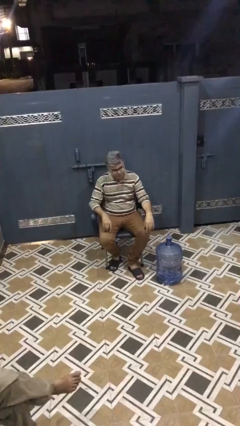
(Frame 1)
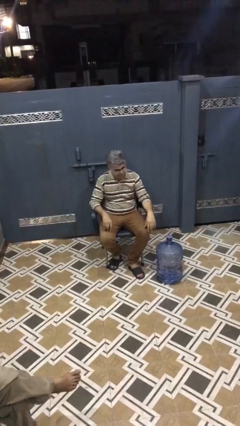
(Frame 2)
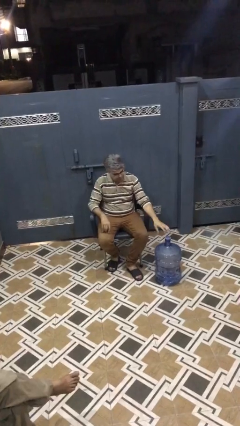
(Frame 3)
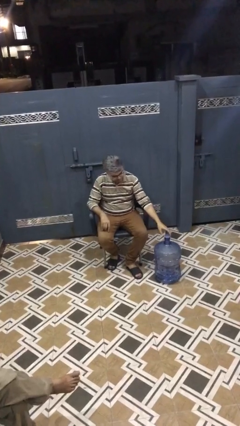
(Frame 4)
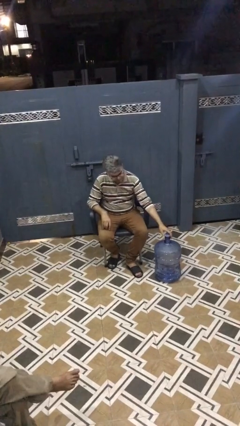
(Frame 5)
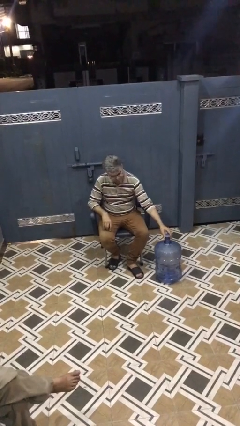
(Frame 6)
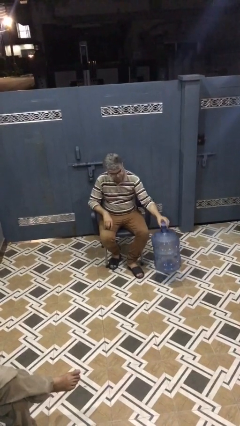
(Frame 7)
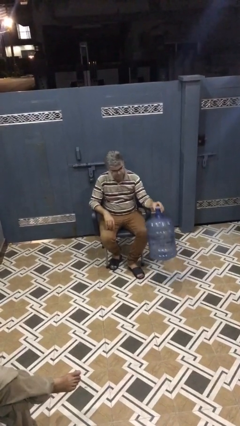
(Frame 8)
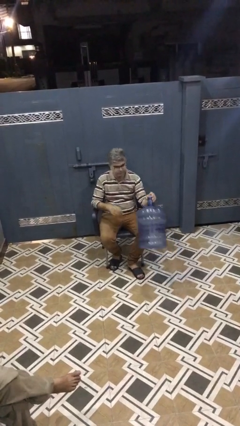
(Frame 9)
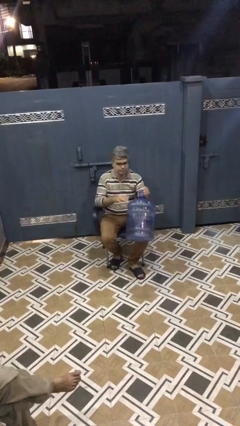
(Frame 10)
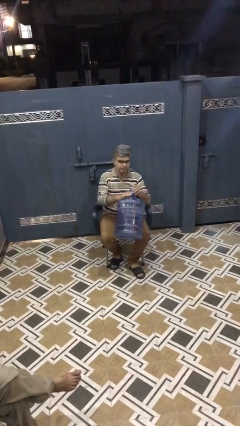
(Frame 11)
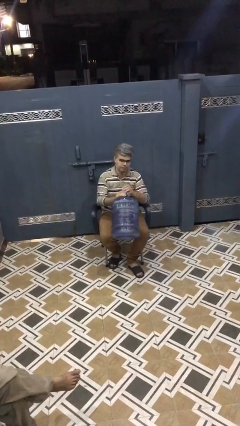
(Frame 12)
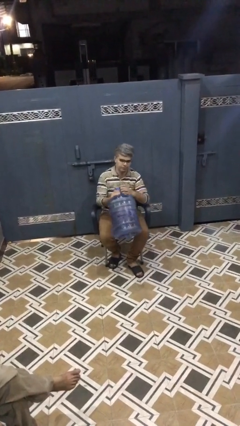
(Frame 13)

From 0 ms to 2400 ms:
person picks up object from floor

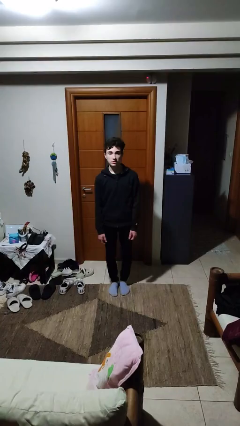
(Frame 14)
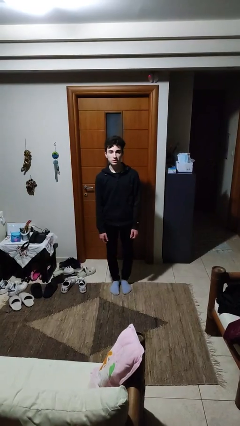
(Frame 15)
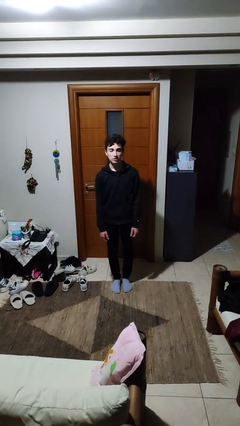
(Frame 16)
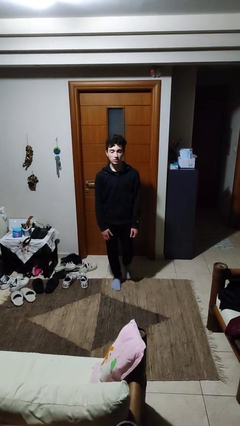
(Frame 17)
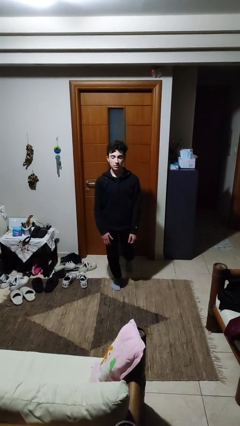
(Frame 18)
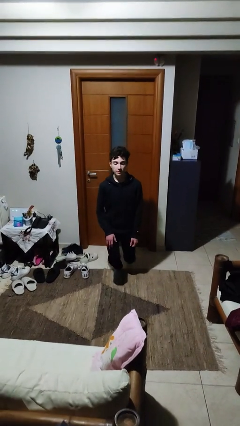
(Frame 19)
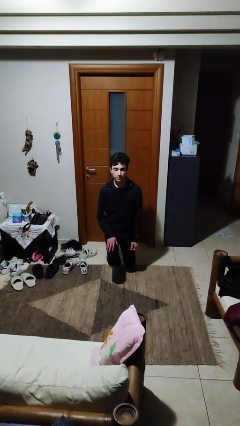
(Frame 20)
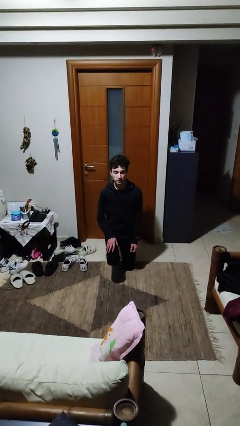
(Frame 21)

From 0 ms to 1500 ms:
person kneels

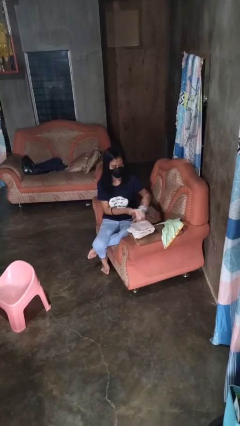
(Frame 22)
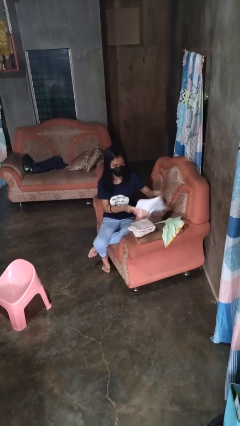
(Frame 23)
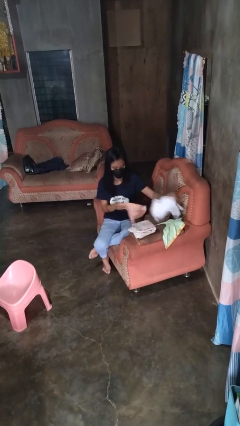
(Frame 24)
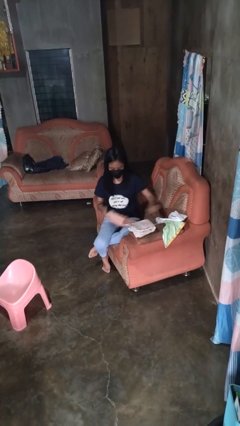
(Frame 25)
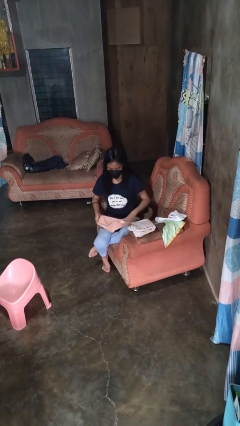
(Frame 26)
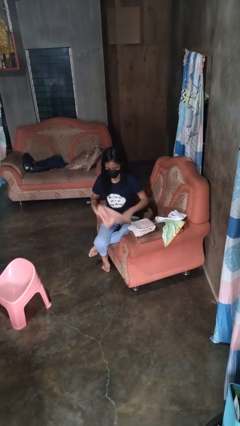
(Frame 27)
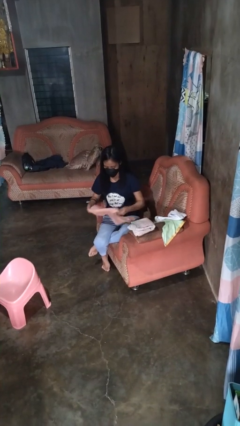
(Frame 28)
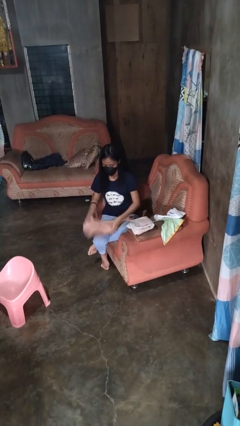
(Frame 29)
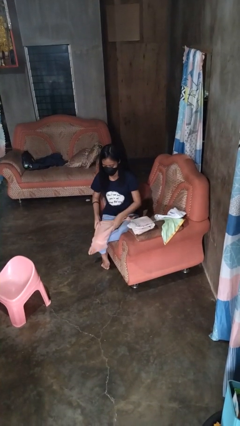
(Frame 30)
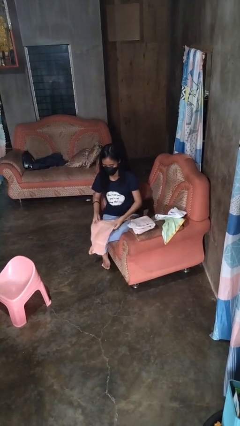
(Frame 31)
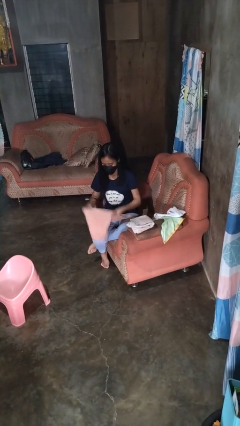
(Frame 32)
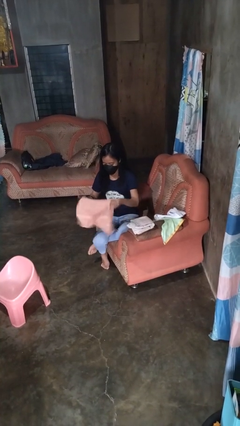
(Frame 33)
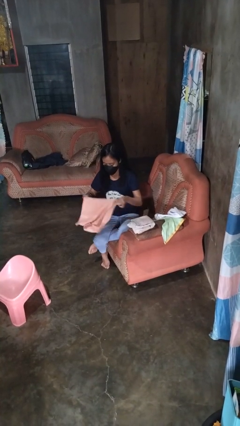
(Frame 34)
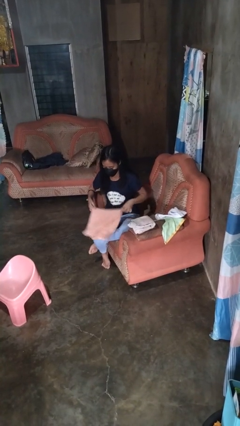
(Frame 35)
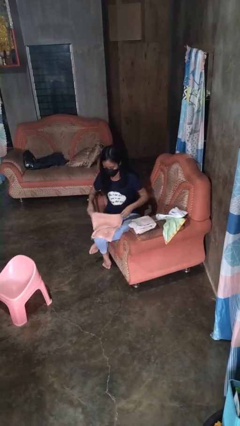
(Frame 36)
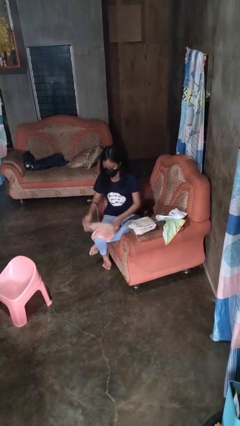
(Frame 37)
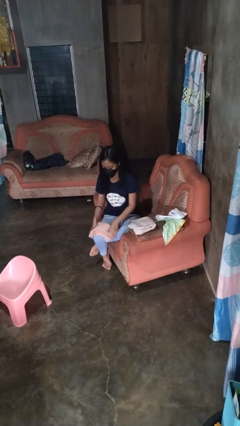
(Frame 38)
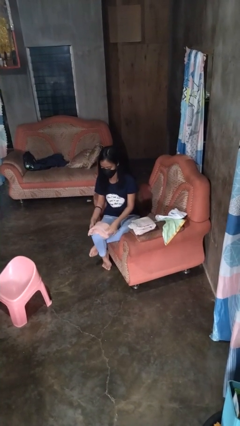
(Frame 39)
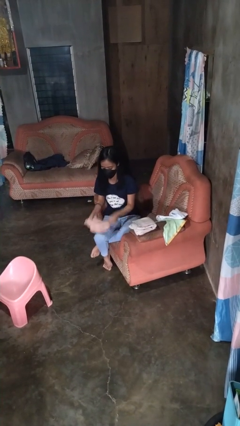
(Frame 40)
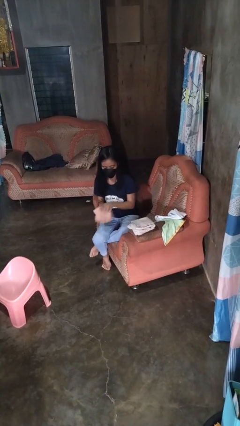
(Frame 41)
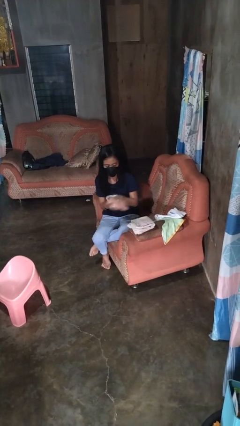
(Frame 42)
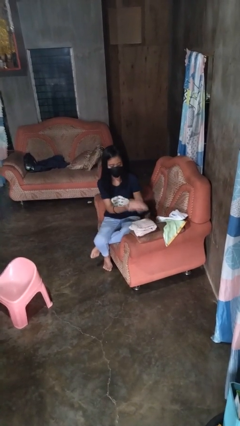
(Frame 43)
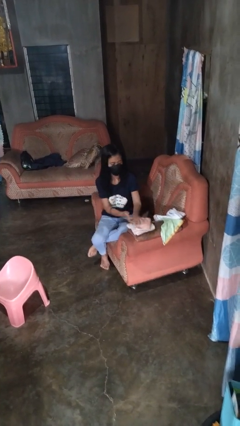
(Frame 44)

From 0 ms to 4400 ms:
person folds towel

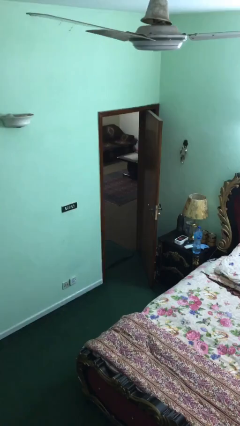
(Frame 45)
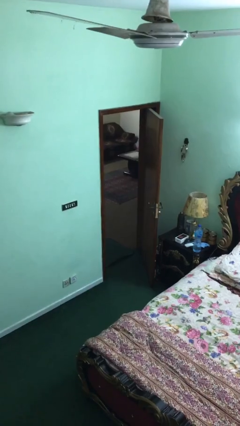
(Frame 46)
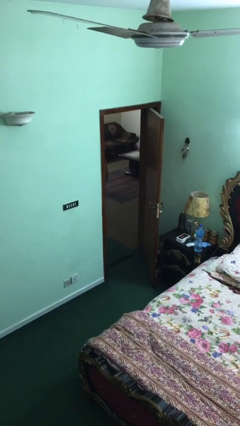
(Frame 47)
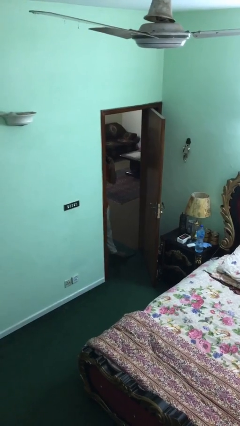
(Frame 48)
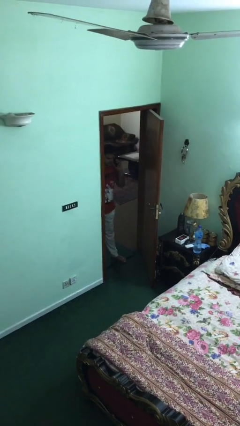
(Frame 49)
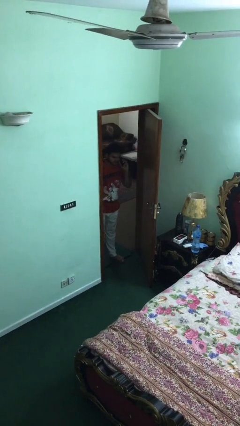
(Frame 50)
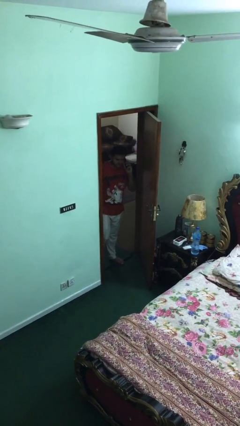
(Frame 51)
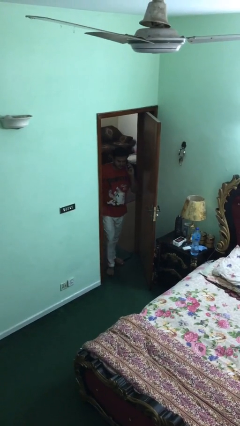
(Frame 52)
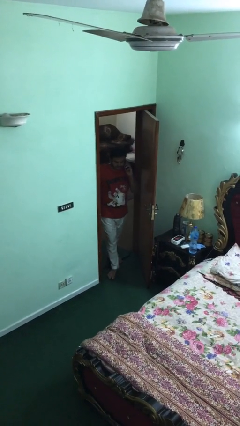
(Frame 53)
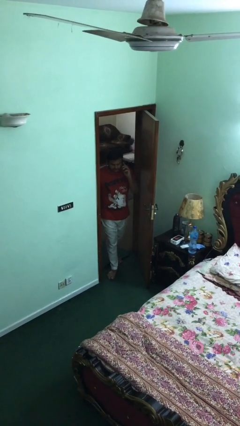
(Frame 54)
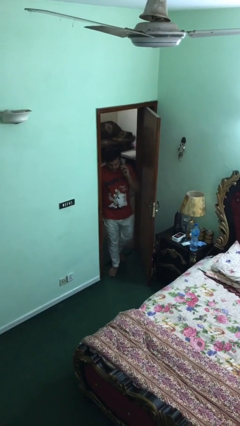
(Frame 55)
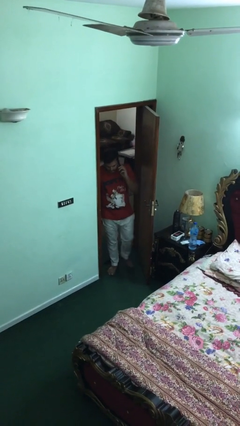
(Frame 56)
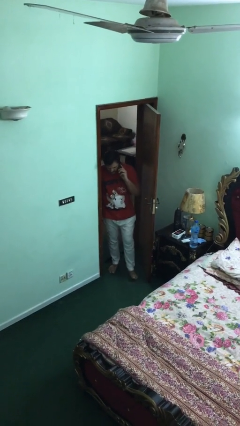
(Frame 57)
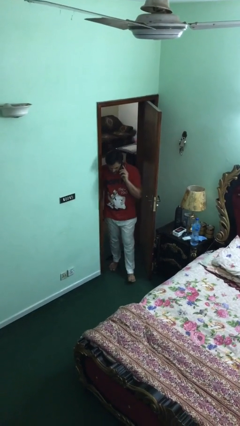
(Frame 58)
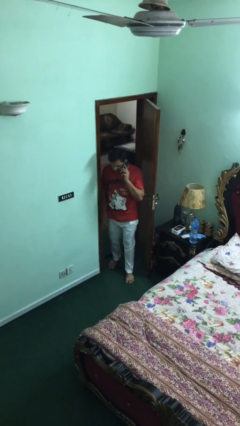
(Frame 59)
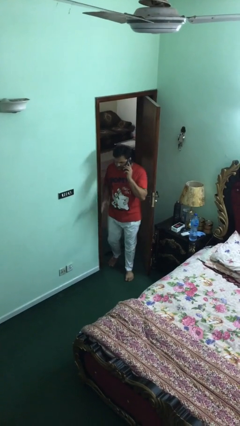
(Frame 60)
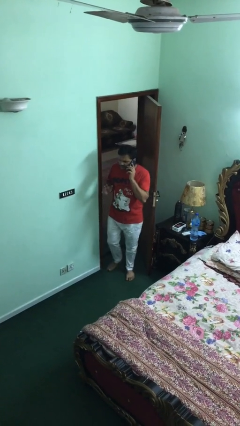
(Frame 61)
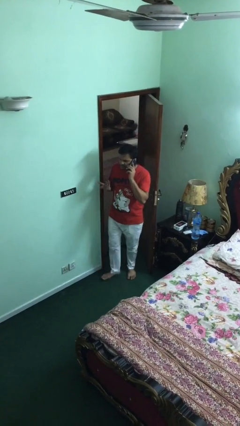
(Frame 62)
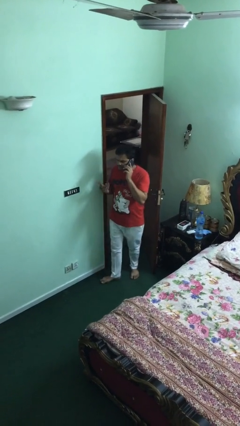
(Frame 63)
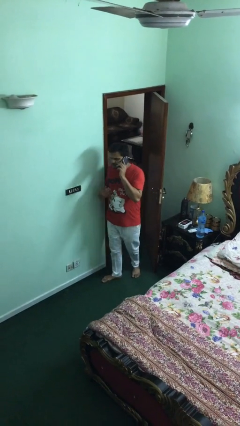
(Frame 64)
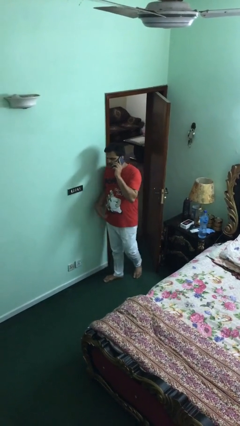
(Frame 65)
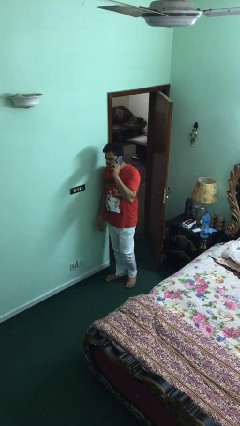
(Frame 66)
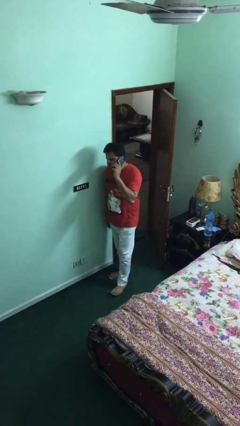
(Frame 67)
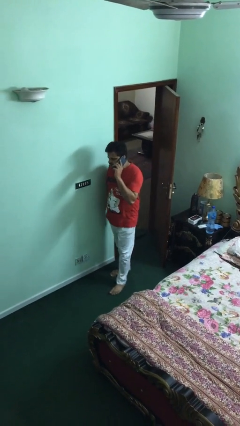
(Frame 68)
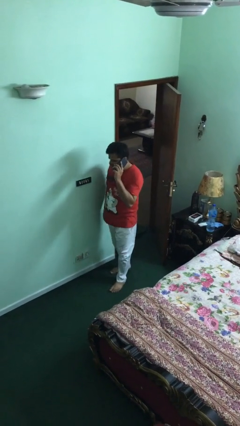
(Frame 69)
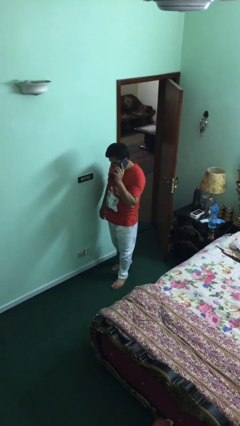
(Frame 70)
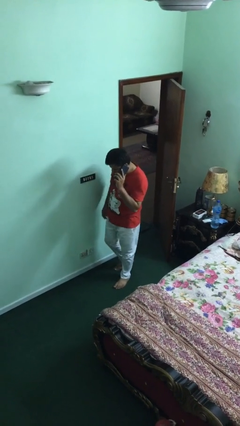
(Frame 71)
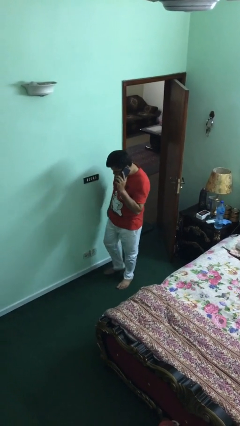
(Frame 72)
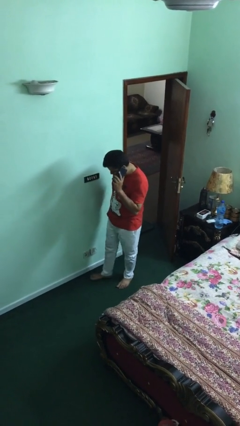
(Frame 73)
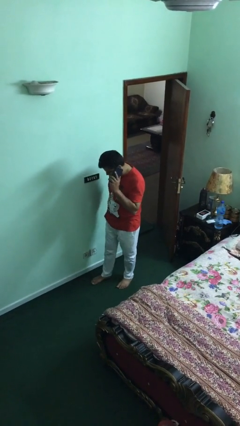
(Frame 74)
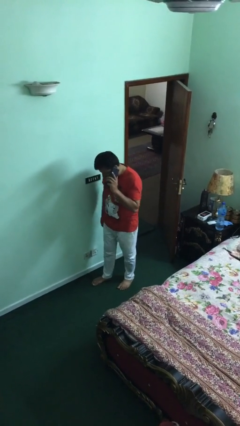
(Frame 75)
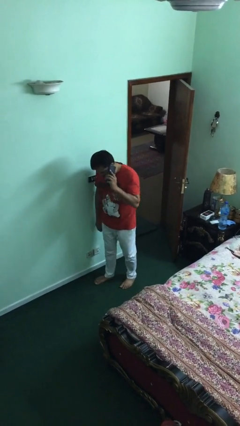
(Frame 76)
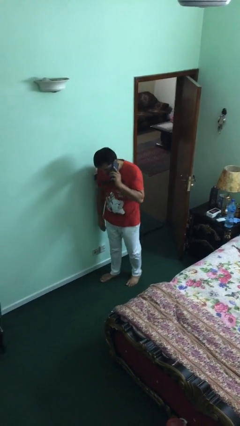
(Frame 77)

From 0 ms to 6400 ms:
person enters scene through structure

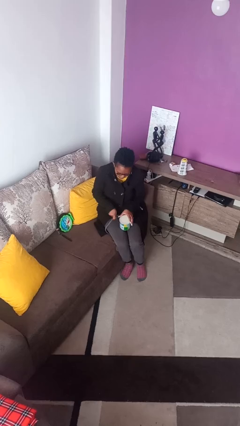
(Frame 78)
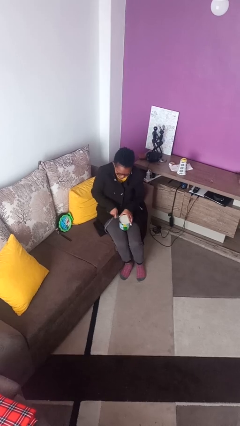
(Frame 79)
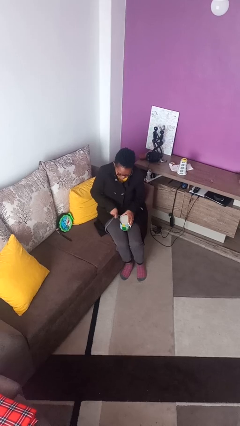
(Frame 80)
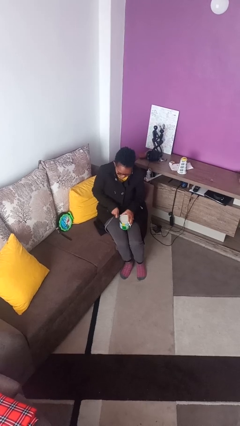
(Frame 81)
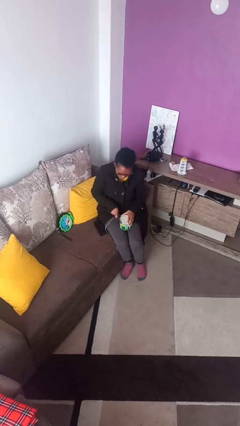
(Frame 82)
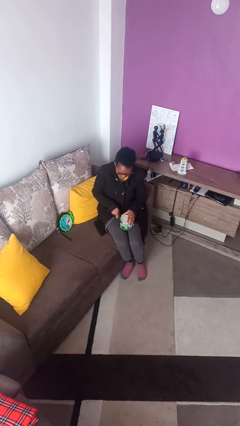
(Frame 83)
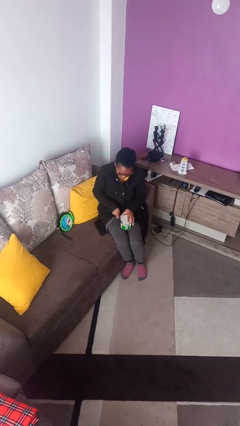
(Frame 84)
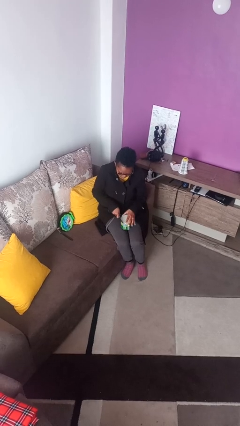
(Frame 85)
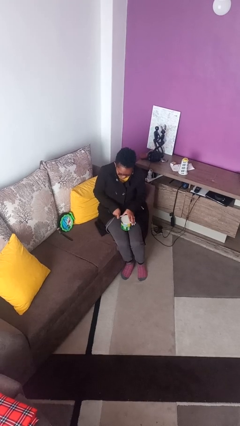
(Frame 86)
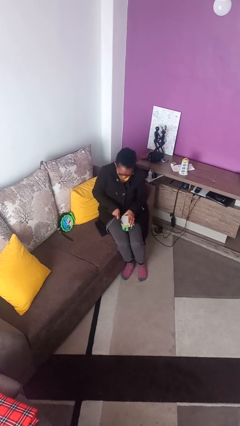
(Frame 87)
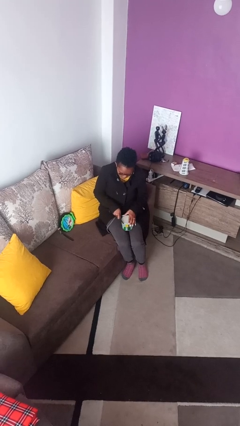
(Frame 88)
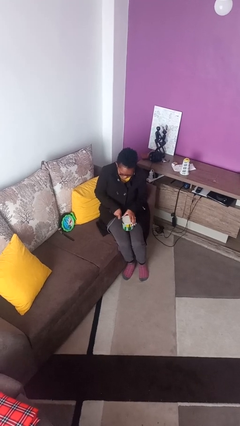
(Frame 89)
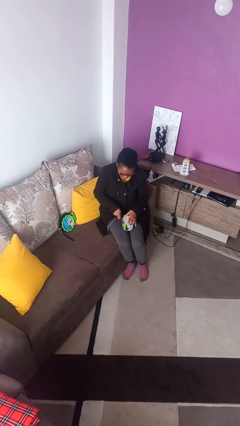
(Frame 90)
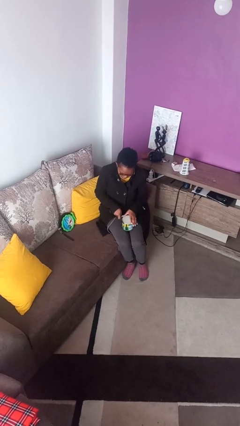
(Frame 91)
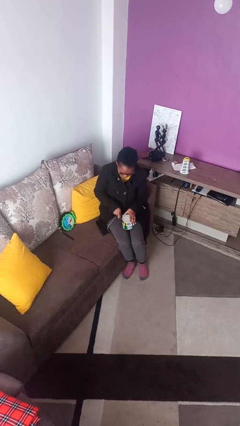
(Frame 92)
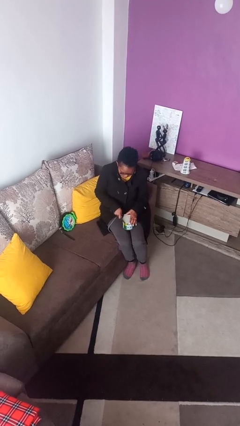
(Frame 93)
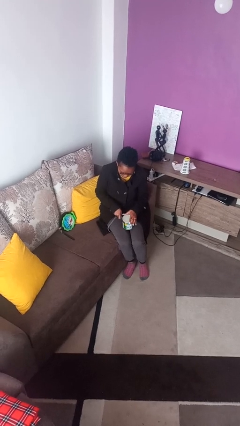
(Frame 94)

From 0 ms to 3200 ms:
person opens can with can opener
